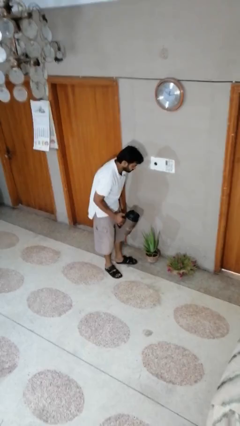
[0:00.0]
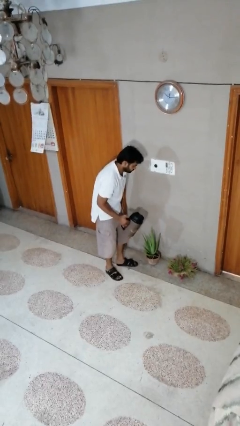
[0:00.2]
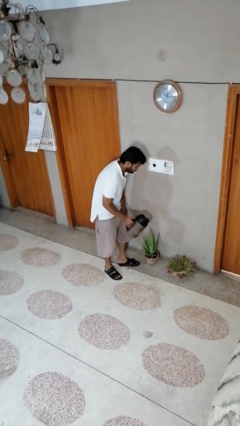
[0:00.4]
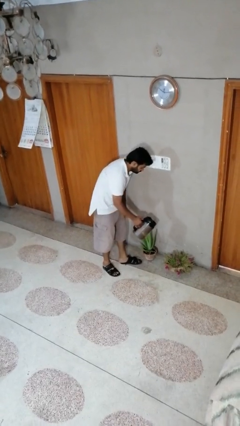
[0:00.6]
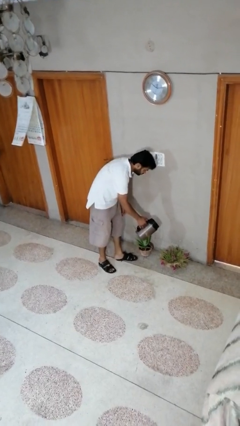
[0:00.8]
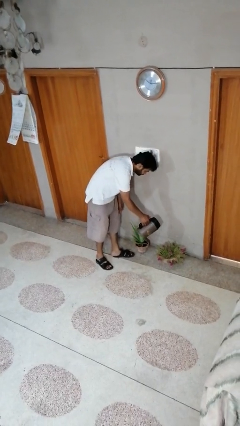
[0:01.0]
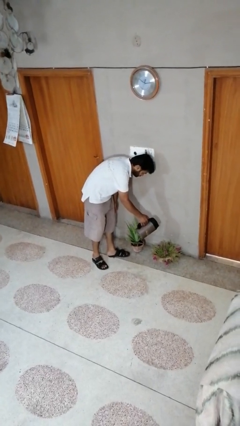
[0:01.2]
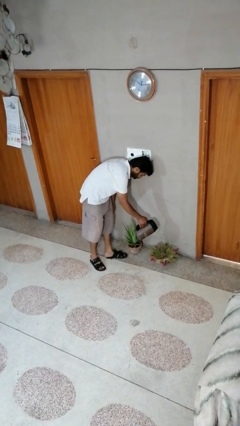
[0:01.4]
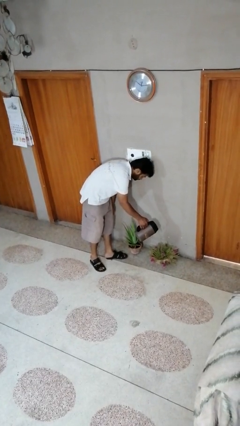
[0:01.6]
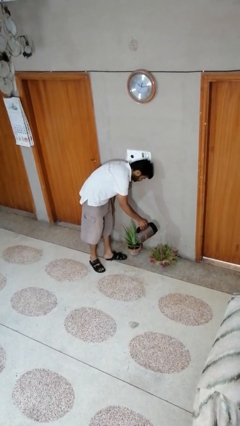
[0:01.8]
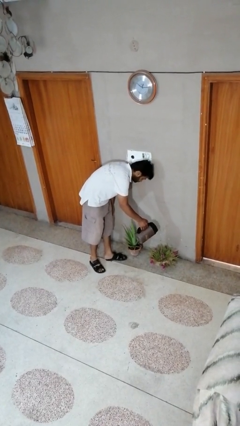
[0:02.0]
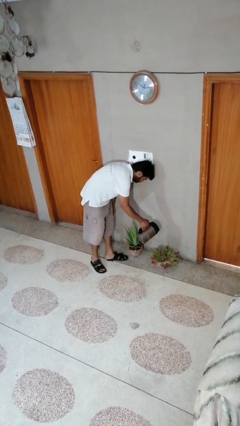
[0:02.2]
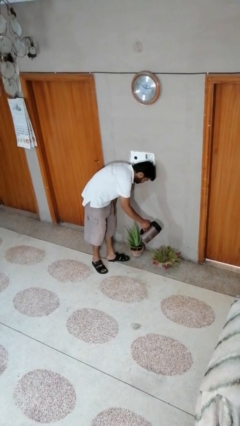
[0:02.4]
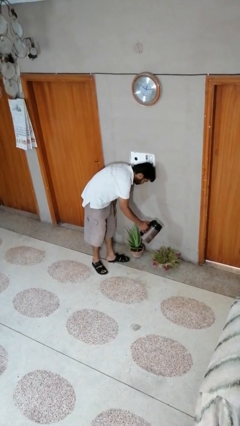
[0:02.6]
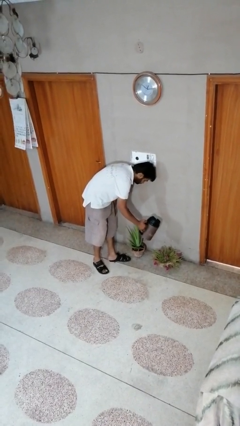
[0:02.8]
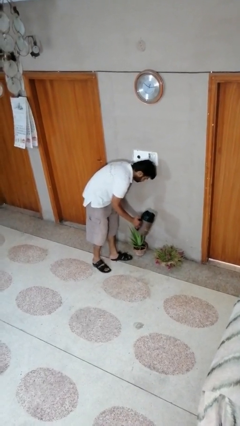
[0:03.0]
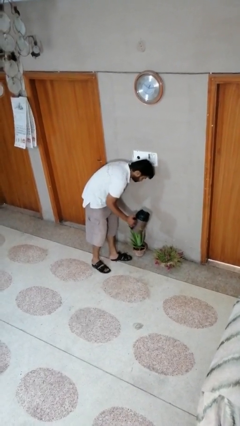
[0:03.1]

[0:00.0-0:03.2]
person waters houseplant

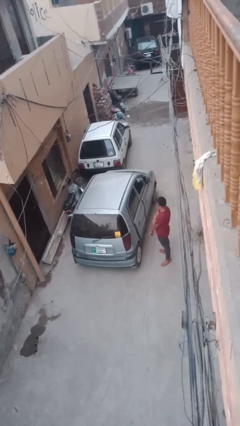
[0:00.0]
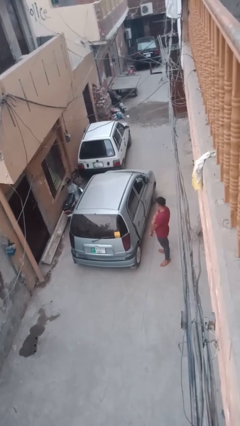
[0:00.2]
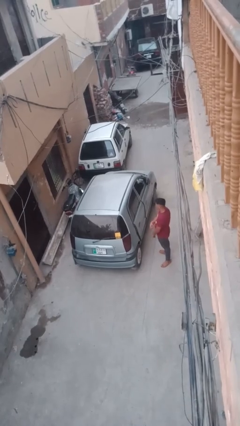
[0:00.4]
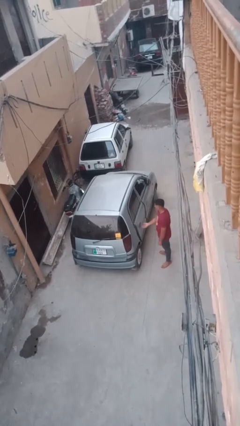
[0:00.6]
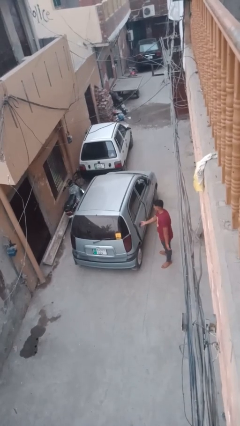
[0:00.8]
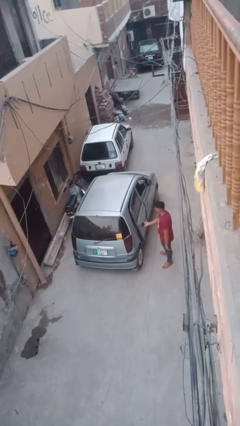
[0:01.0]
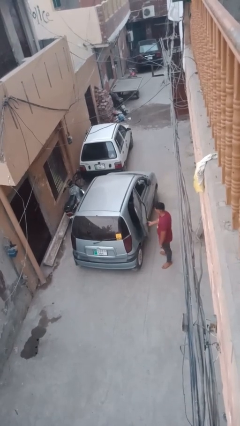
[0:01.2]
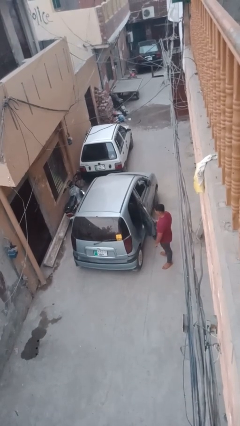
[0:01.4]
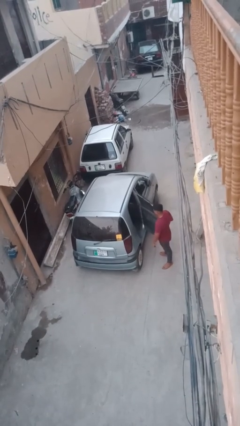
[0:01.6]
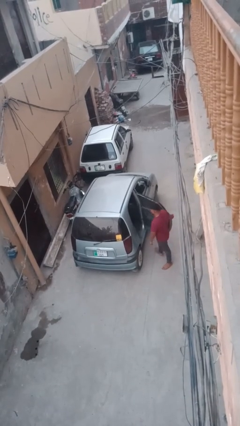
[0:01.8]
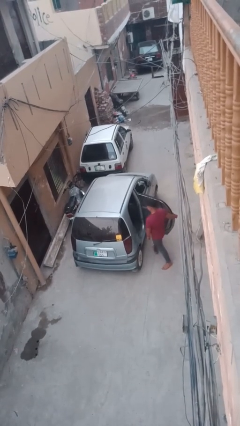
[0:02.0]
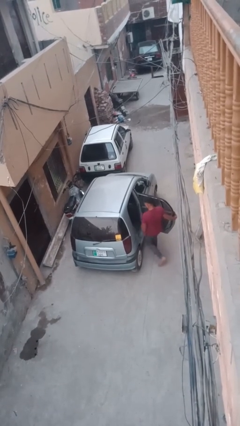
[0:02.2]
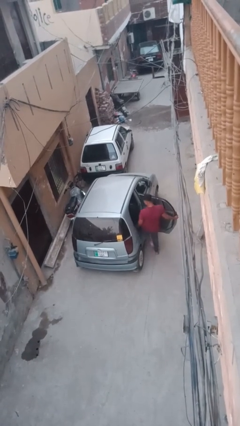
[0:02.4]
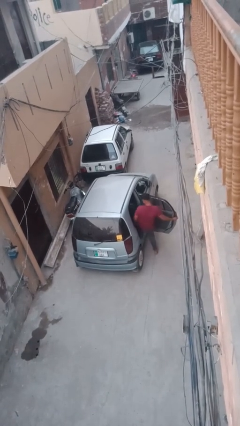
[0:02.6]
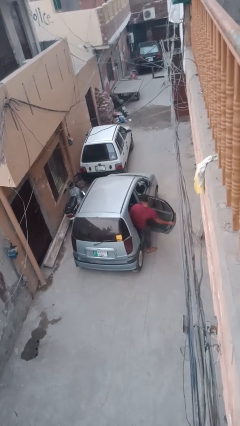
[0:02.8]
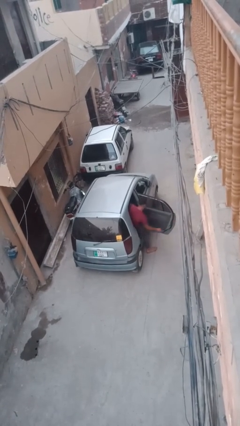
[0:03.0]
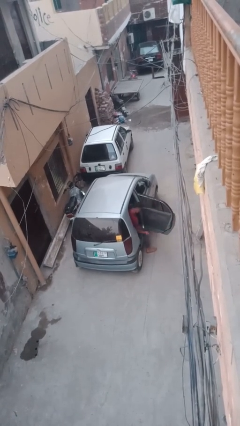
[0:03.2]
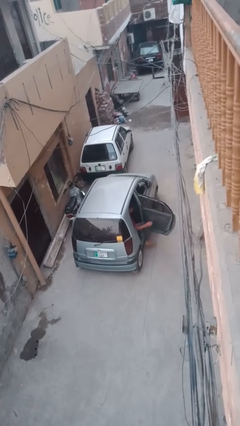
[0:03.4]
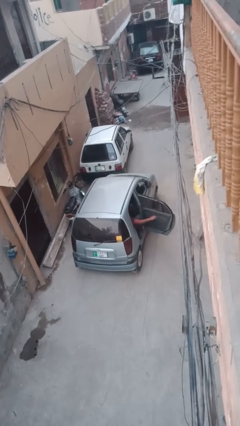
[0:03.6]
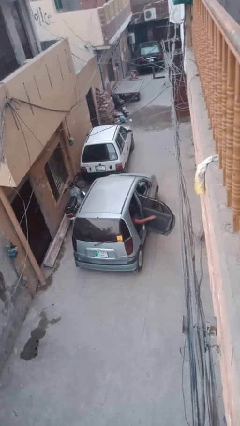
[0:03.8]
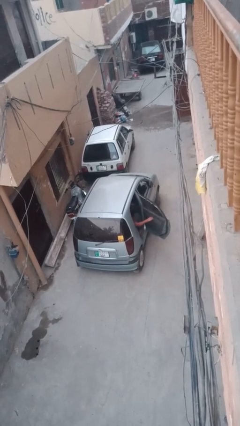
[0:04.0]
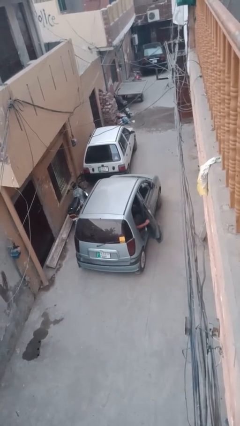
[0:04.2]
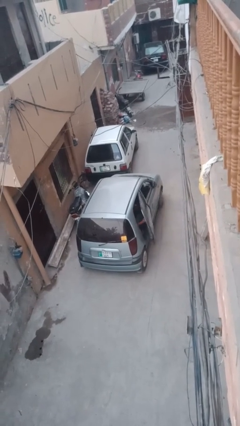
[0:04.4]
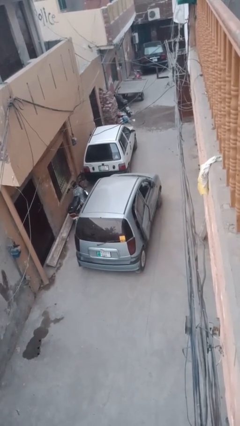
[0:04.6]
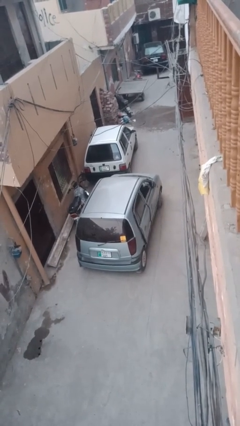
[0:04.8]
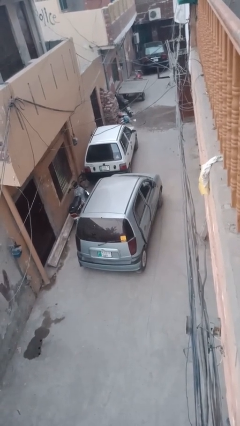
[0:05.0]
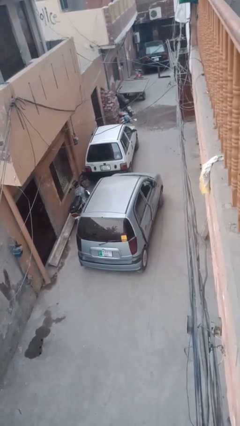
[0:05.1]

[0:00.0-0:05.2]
car picks up person

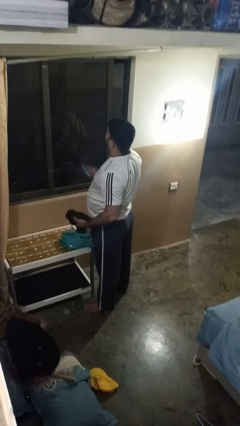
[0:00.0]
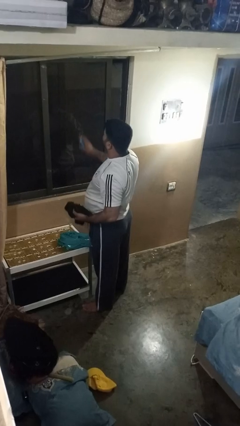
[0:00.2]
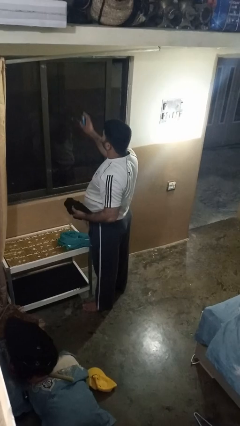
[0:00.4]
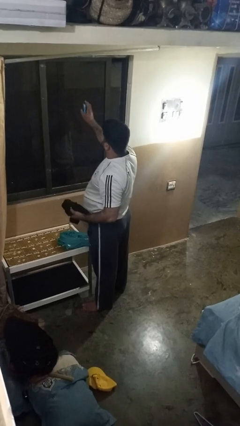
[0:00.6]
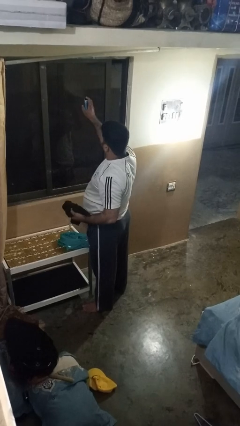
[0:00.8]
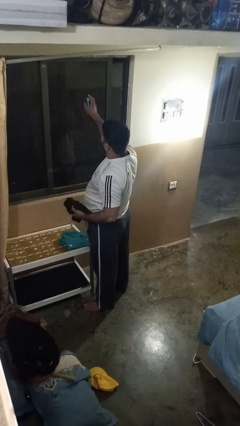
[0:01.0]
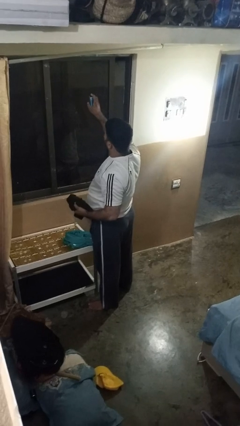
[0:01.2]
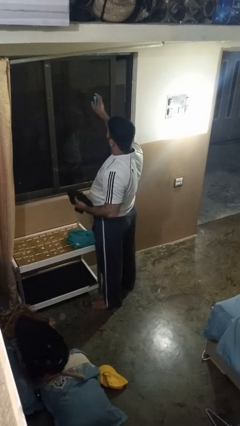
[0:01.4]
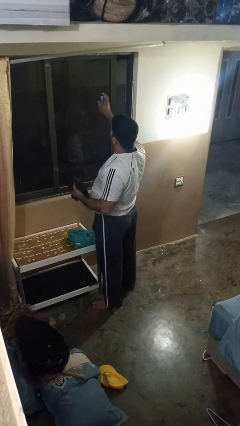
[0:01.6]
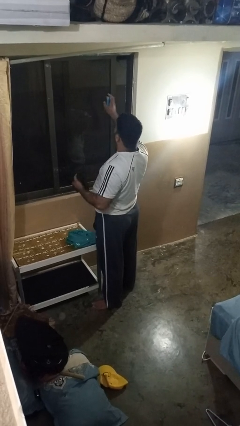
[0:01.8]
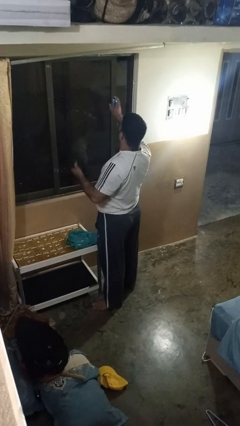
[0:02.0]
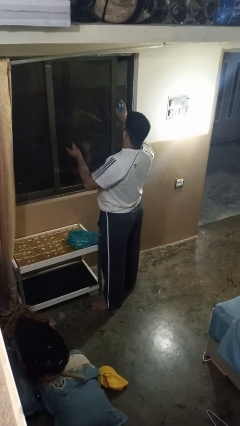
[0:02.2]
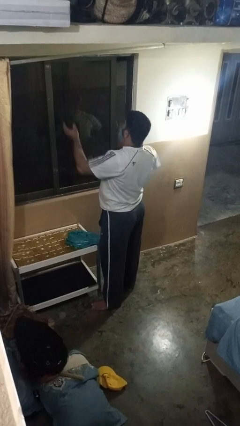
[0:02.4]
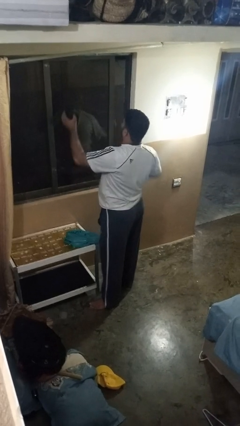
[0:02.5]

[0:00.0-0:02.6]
person sprays from bottle

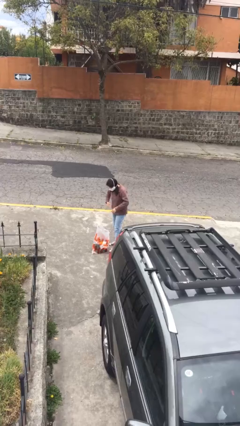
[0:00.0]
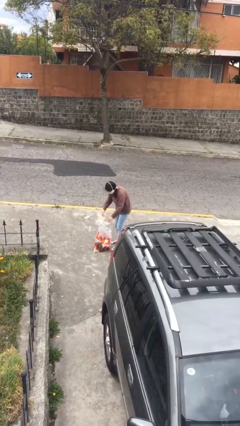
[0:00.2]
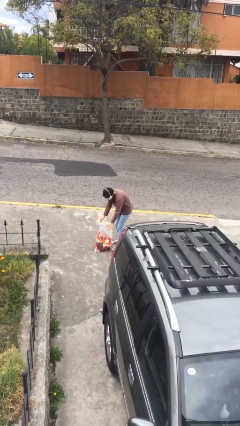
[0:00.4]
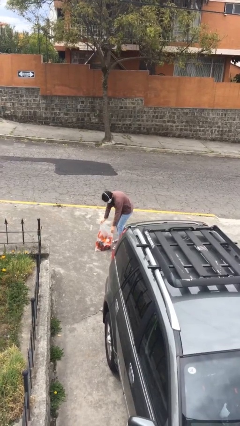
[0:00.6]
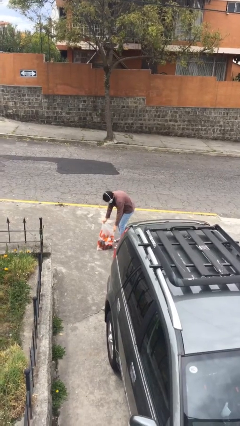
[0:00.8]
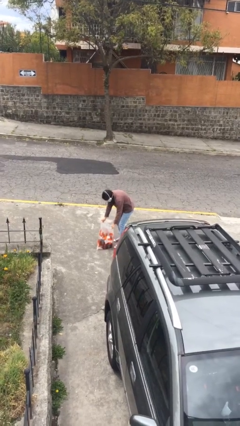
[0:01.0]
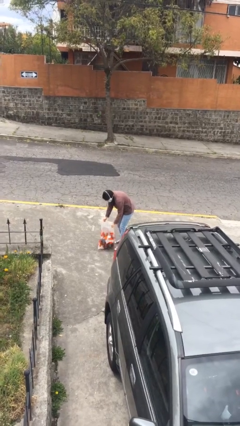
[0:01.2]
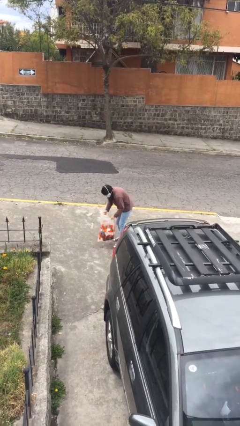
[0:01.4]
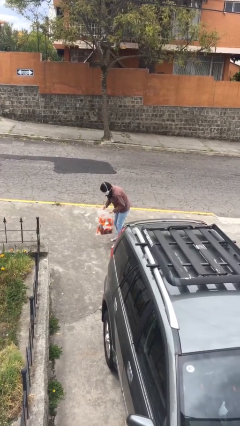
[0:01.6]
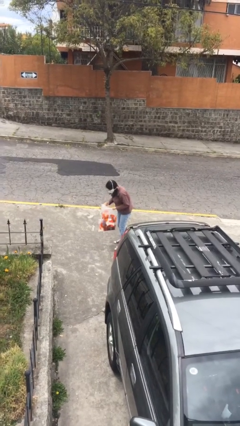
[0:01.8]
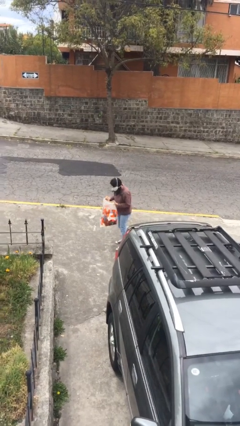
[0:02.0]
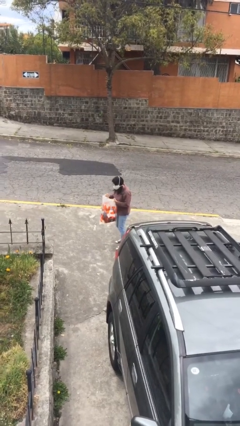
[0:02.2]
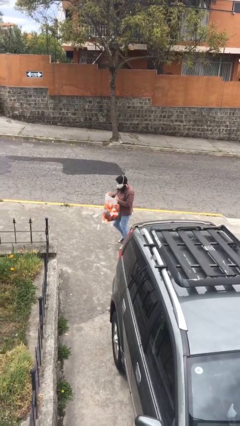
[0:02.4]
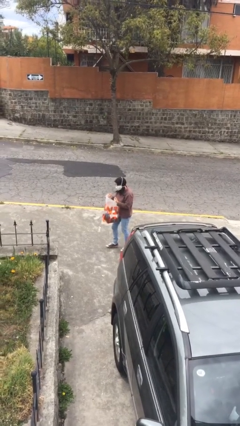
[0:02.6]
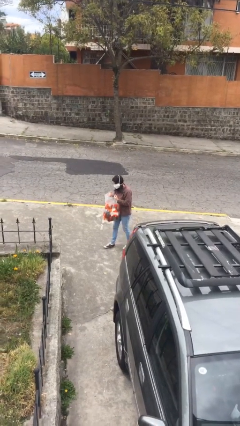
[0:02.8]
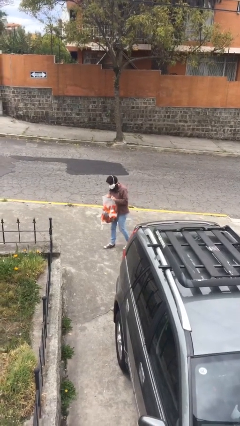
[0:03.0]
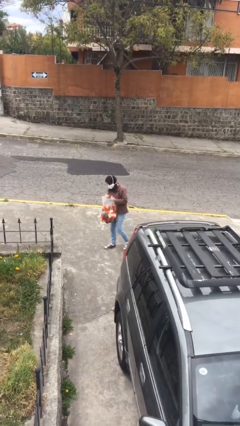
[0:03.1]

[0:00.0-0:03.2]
person picks up object from floor

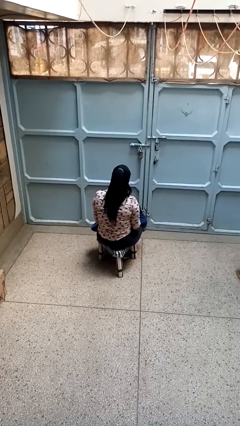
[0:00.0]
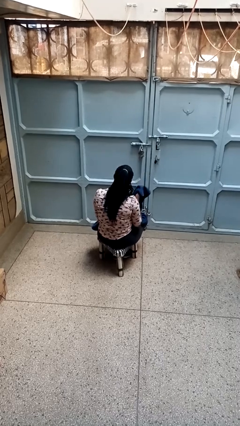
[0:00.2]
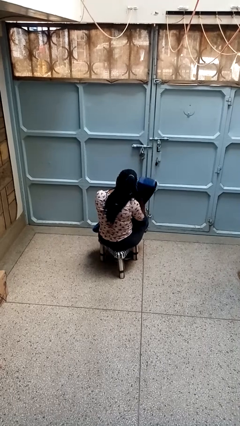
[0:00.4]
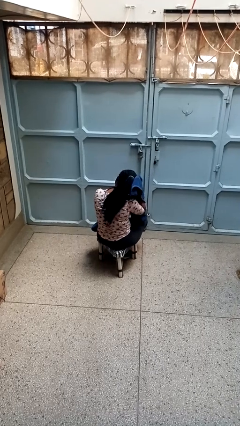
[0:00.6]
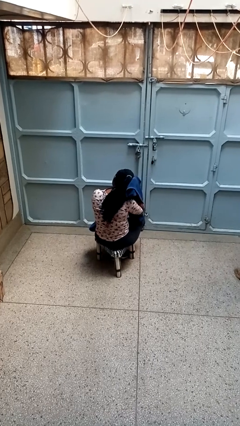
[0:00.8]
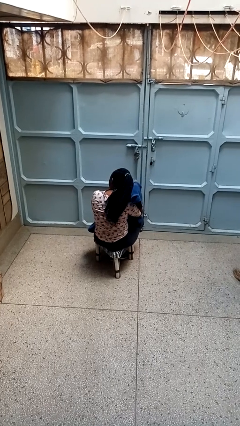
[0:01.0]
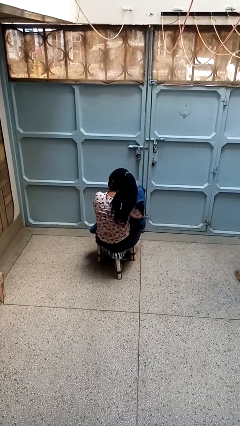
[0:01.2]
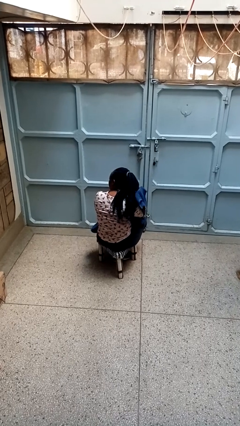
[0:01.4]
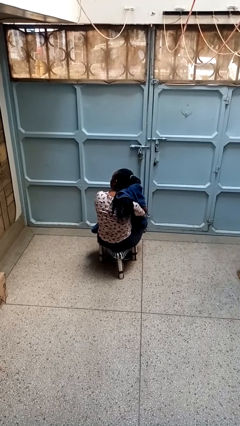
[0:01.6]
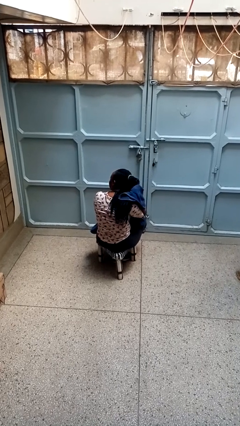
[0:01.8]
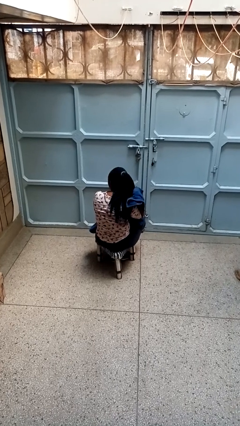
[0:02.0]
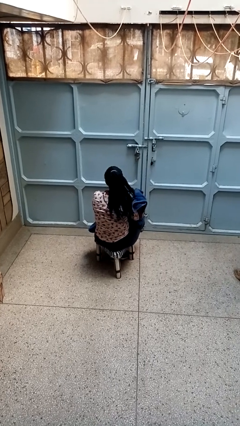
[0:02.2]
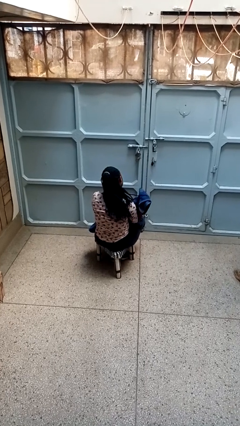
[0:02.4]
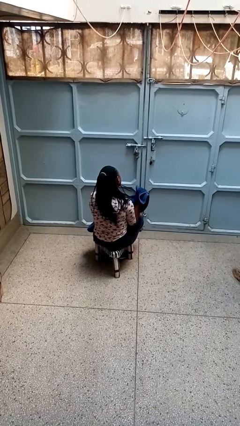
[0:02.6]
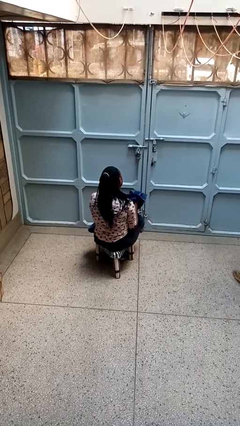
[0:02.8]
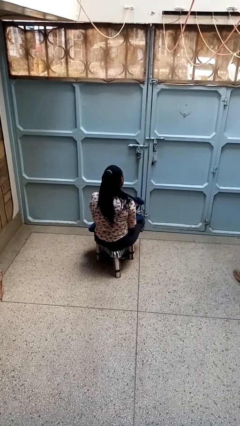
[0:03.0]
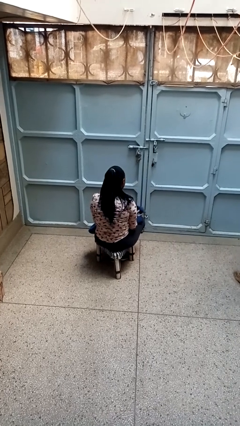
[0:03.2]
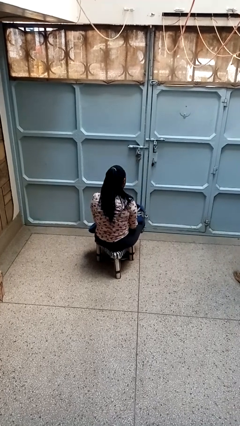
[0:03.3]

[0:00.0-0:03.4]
person dries hair with towel
